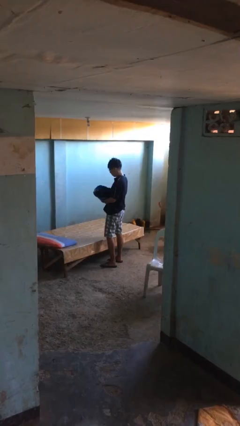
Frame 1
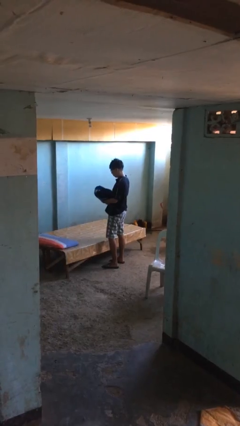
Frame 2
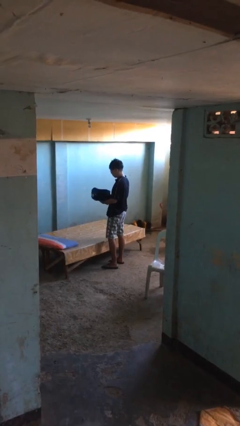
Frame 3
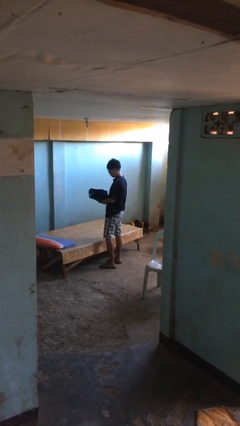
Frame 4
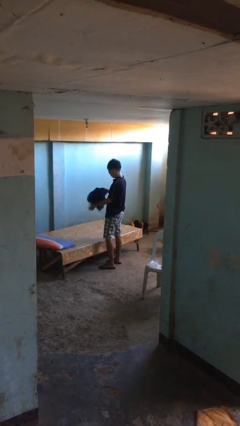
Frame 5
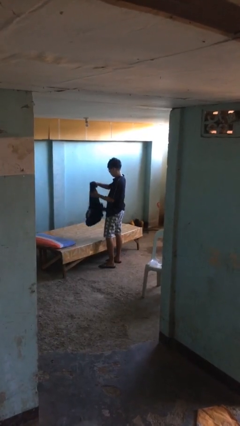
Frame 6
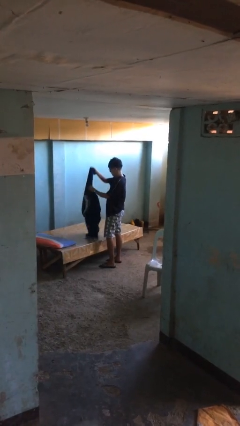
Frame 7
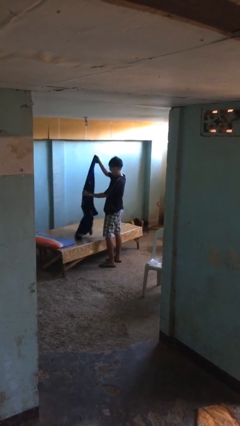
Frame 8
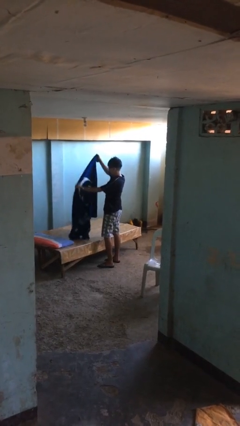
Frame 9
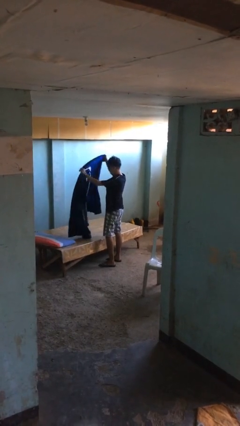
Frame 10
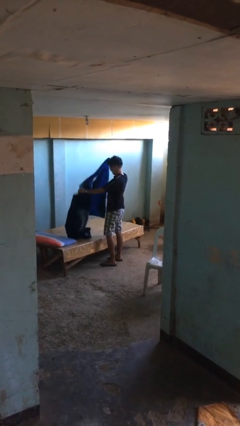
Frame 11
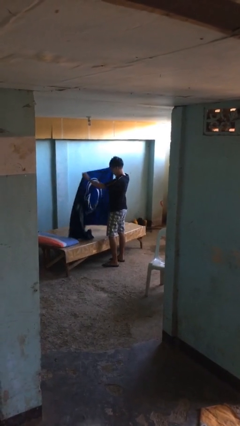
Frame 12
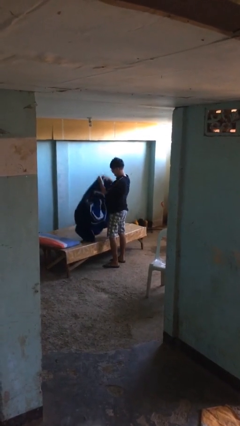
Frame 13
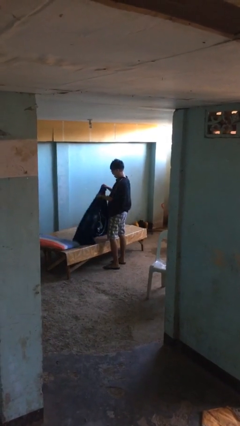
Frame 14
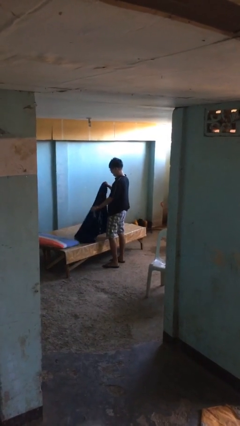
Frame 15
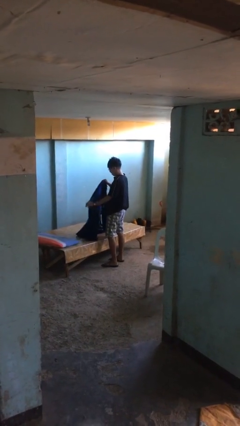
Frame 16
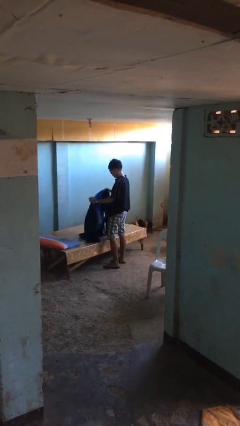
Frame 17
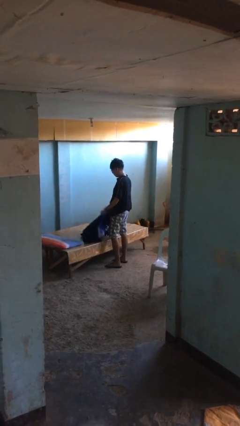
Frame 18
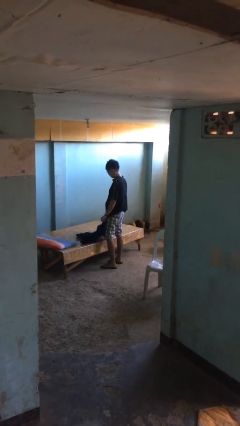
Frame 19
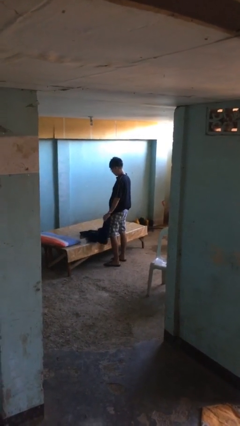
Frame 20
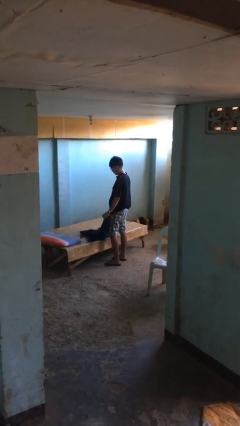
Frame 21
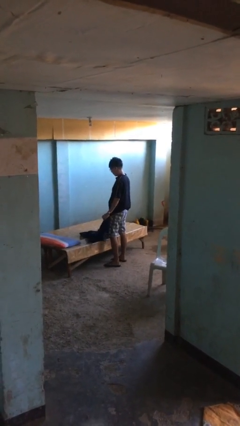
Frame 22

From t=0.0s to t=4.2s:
person unfolds blanket

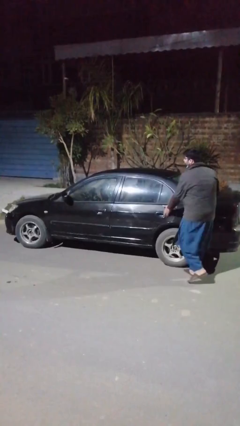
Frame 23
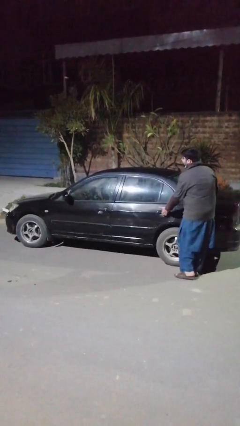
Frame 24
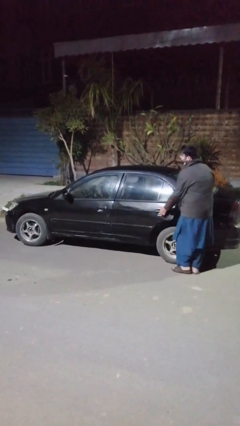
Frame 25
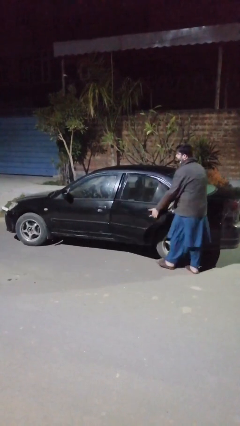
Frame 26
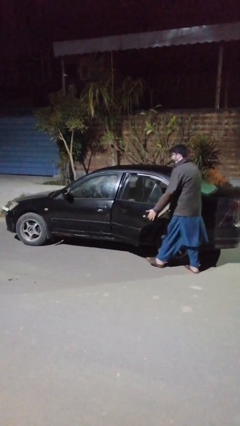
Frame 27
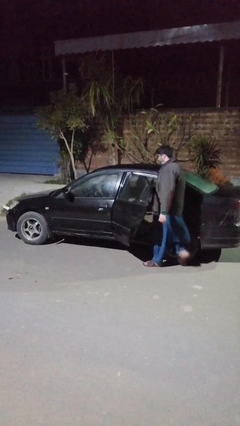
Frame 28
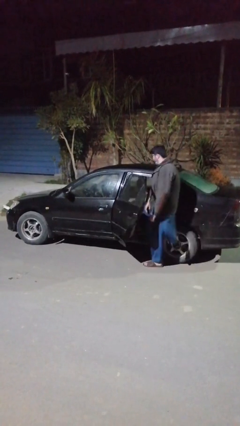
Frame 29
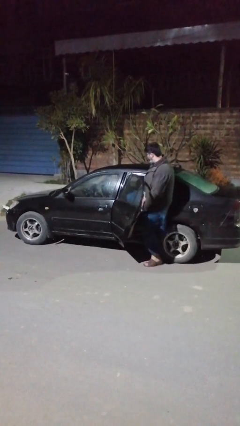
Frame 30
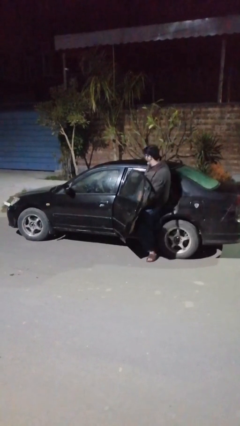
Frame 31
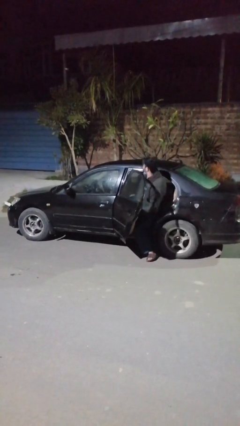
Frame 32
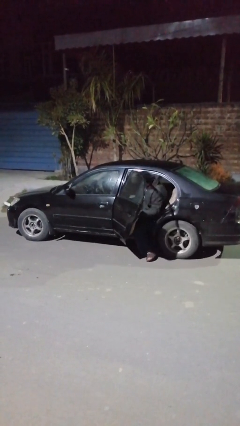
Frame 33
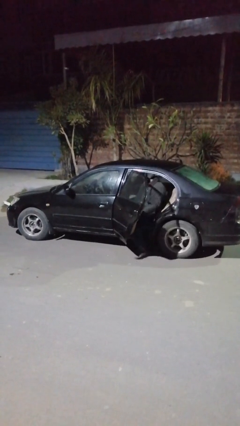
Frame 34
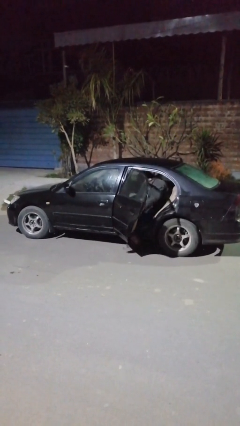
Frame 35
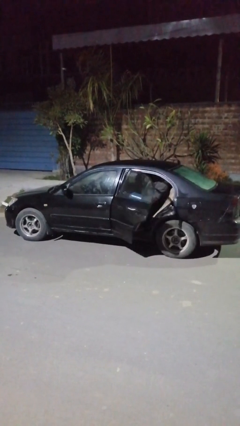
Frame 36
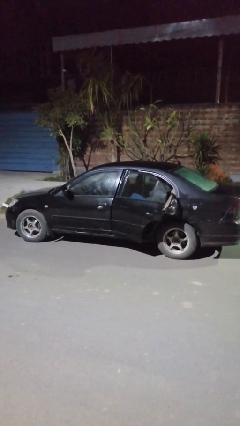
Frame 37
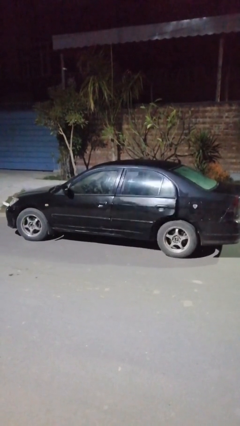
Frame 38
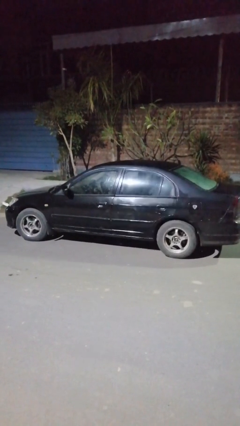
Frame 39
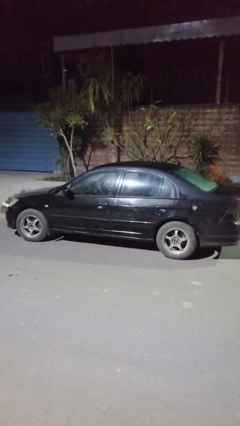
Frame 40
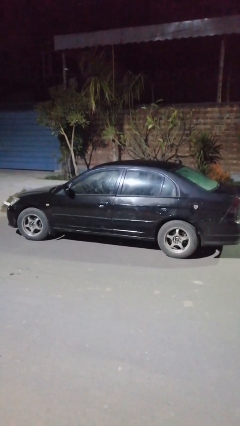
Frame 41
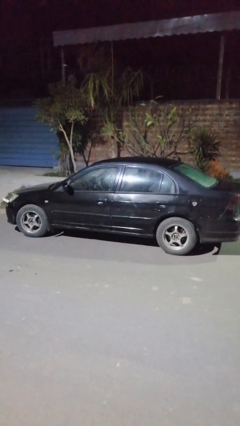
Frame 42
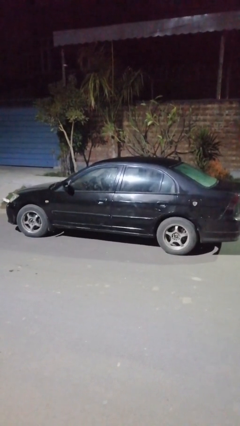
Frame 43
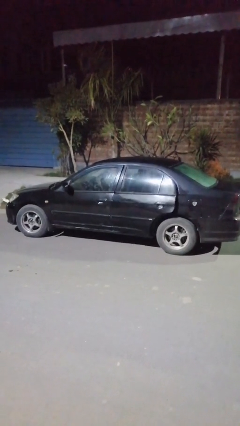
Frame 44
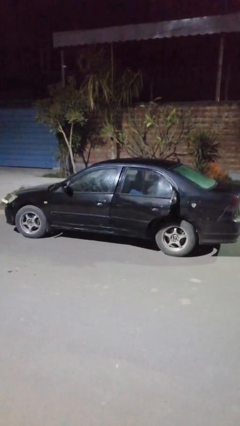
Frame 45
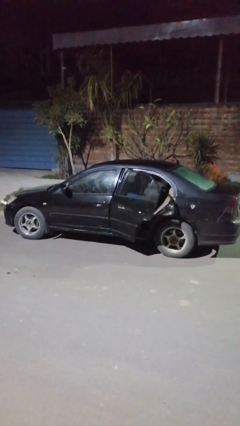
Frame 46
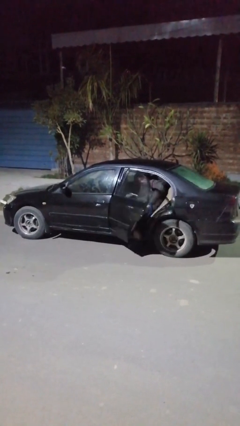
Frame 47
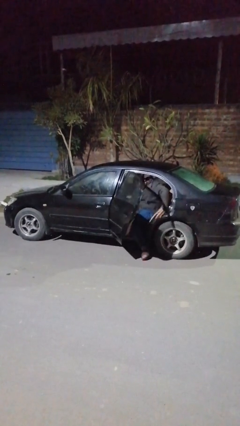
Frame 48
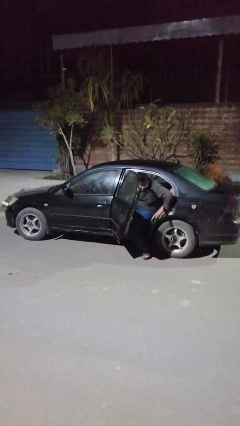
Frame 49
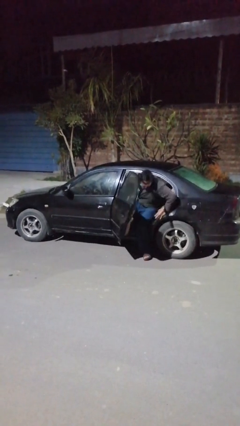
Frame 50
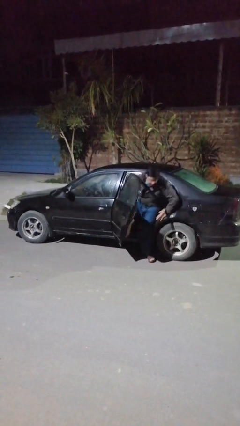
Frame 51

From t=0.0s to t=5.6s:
car picks up person

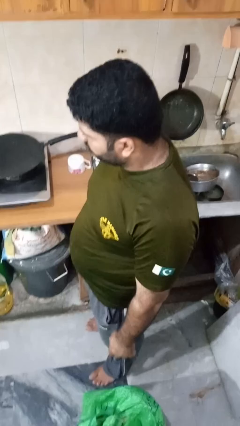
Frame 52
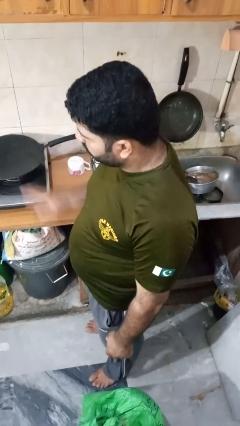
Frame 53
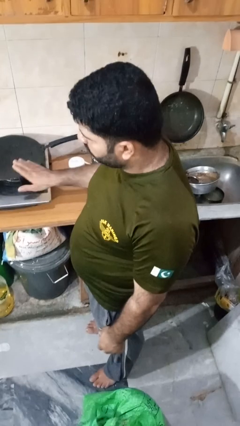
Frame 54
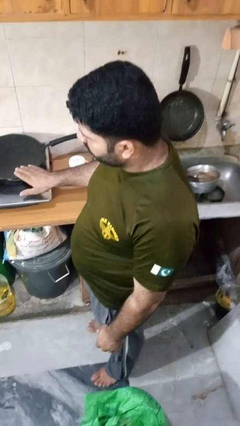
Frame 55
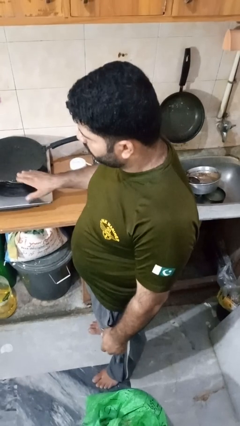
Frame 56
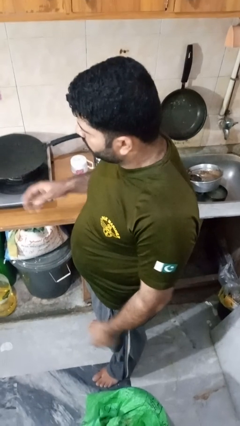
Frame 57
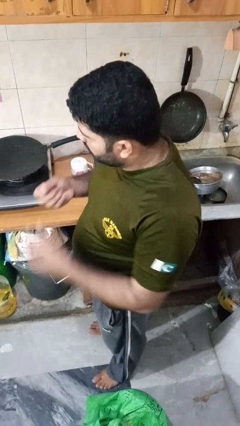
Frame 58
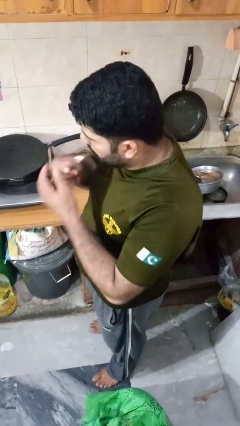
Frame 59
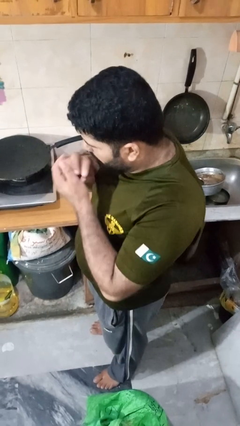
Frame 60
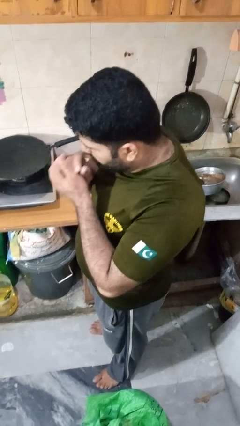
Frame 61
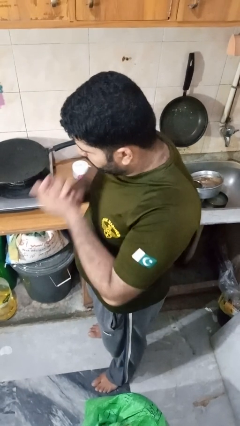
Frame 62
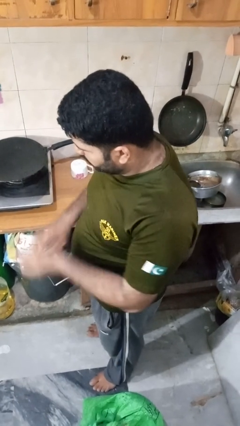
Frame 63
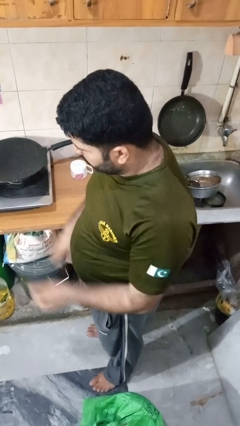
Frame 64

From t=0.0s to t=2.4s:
person burns hand

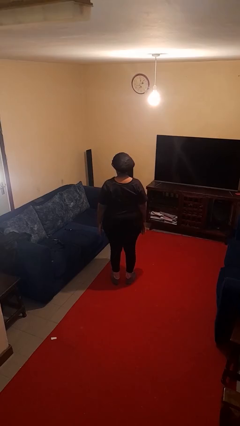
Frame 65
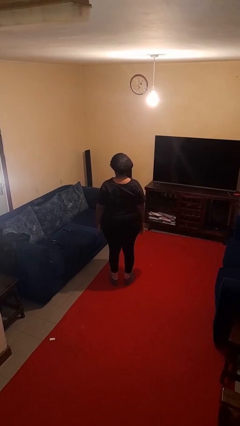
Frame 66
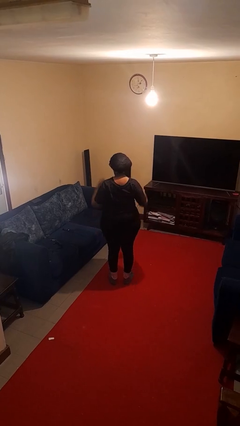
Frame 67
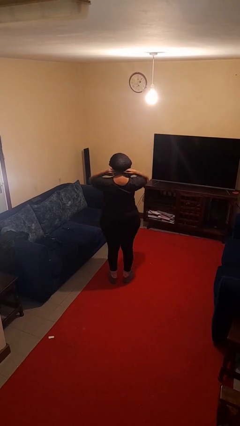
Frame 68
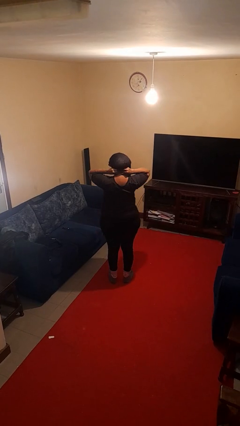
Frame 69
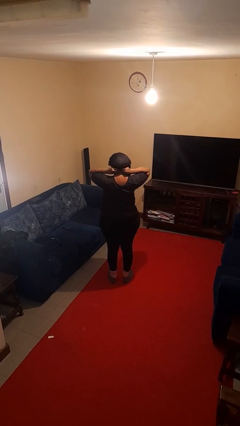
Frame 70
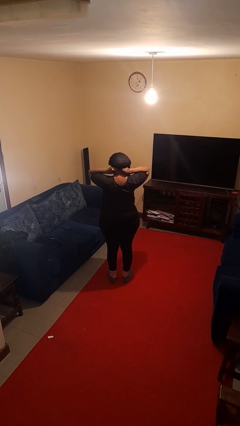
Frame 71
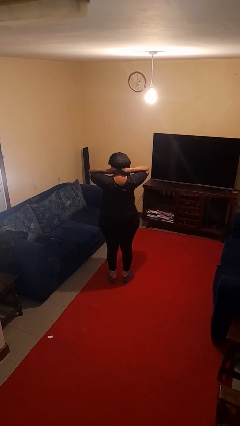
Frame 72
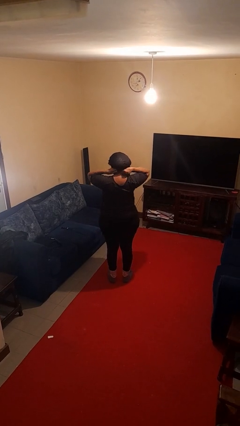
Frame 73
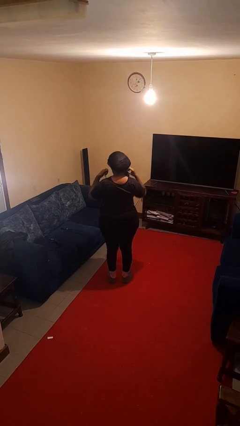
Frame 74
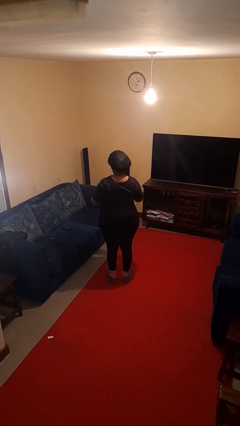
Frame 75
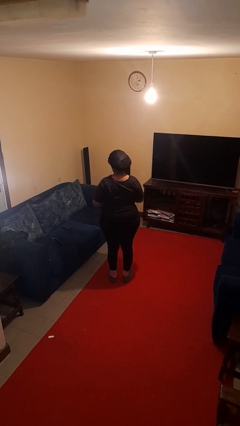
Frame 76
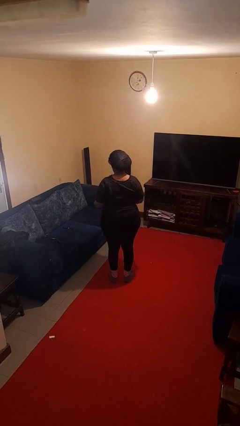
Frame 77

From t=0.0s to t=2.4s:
person takes off necklace

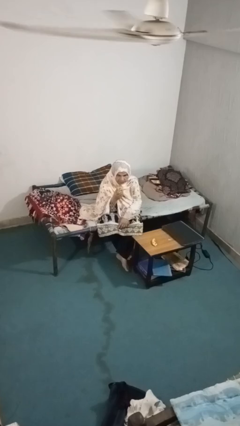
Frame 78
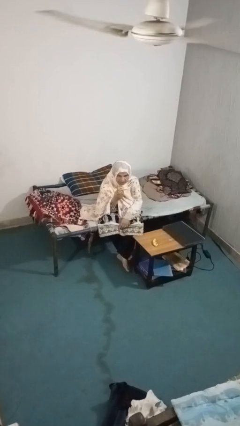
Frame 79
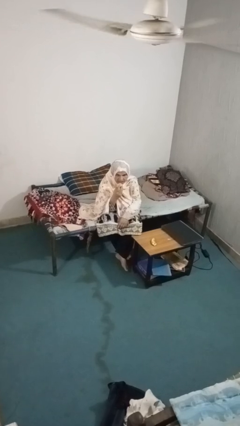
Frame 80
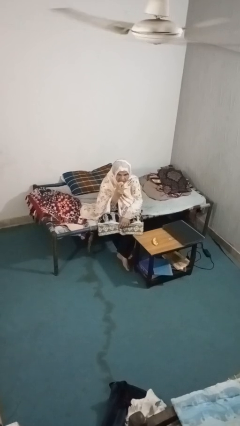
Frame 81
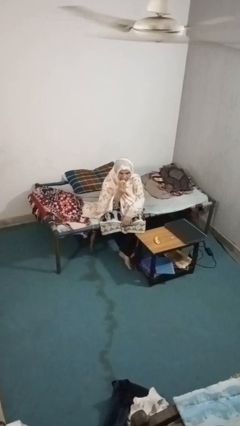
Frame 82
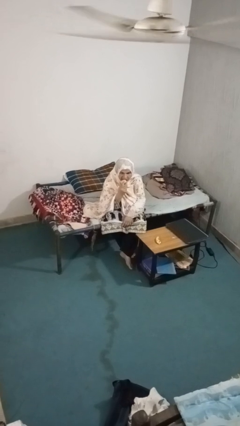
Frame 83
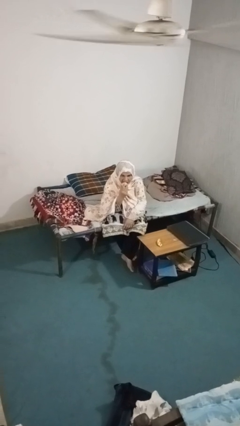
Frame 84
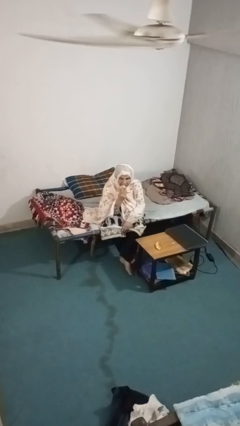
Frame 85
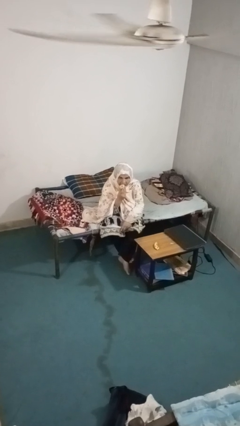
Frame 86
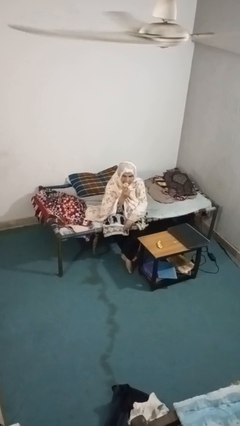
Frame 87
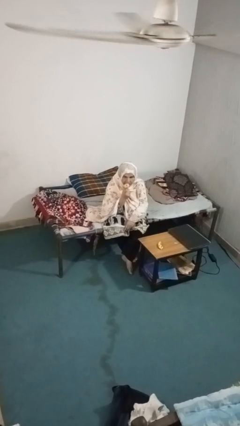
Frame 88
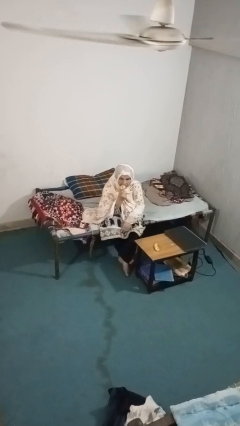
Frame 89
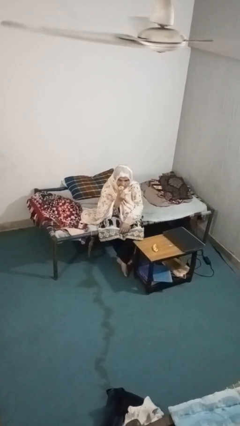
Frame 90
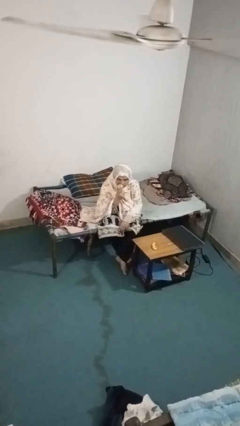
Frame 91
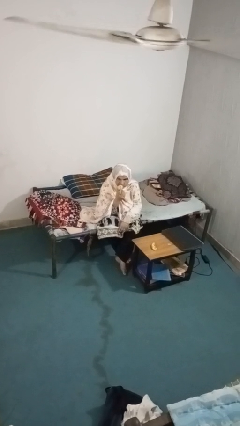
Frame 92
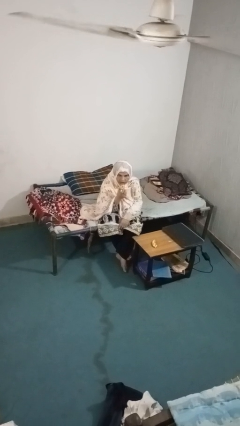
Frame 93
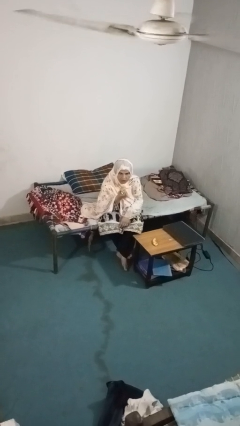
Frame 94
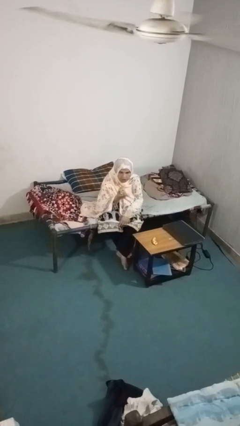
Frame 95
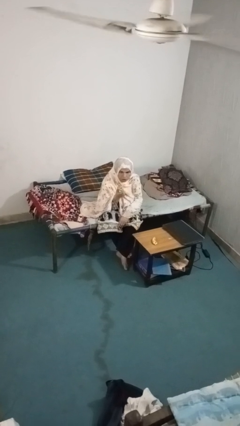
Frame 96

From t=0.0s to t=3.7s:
person eats apple
